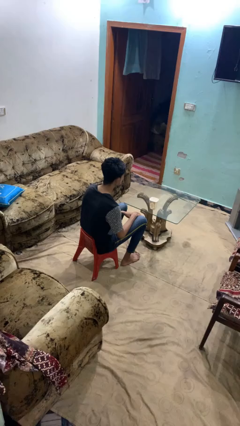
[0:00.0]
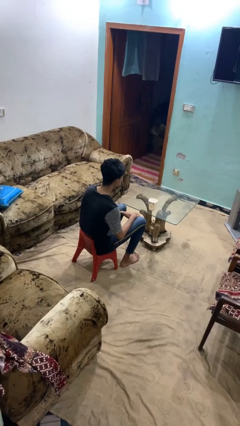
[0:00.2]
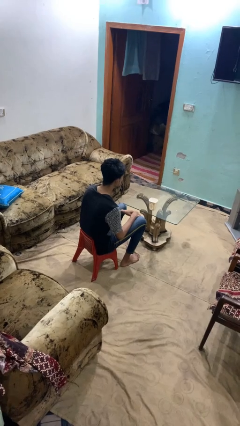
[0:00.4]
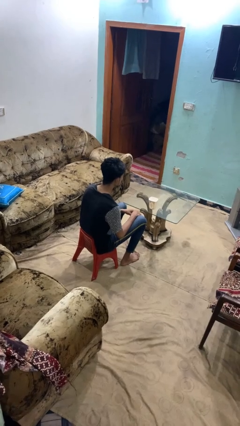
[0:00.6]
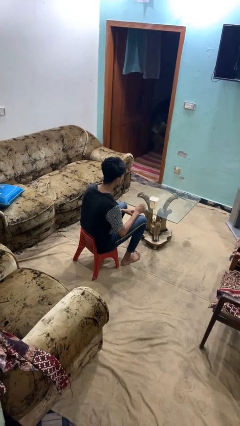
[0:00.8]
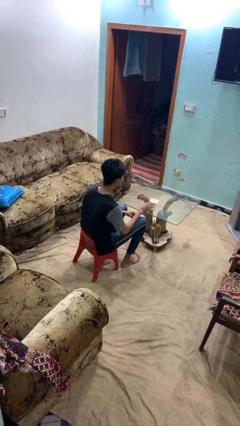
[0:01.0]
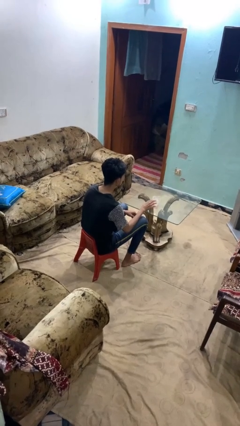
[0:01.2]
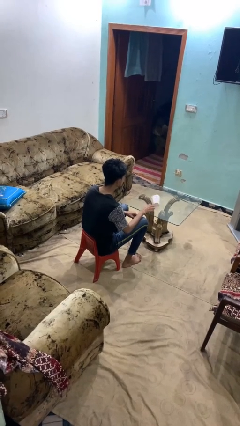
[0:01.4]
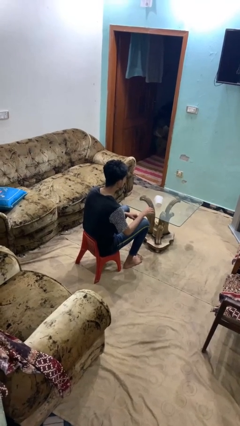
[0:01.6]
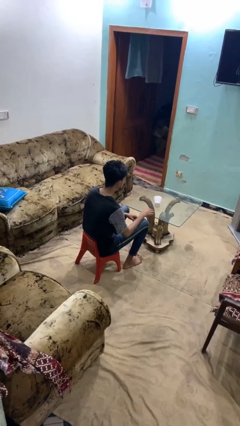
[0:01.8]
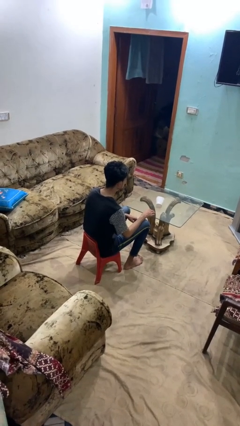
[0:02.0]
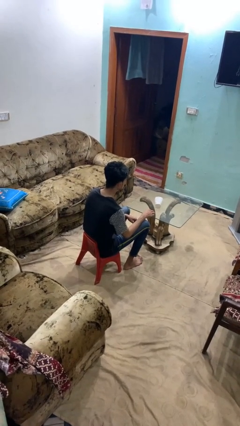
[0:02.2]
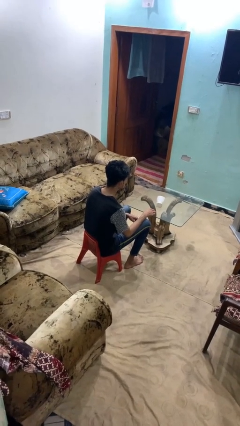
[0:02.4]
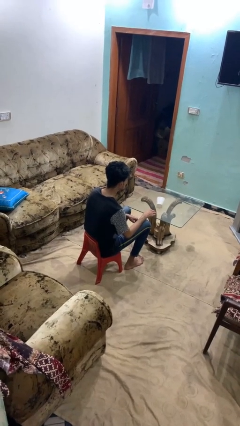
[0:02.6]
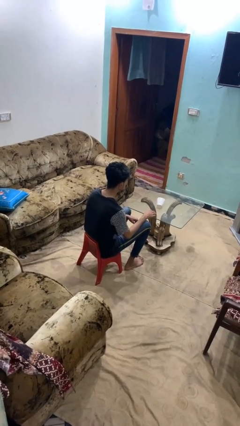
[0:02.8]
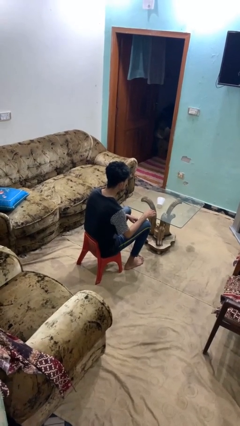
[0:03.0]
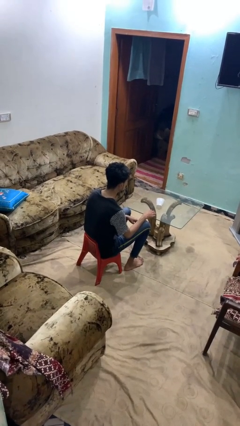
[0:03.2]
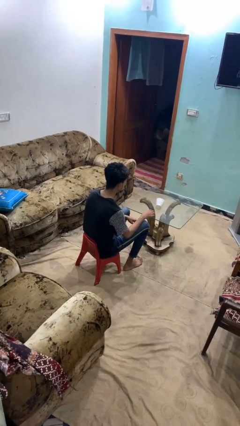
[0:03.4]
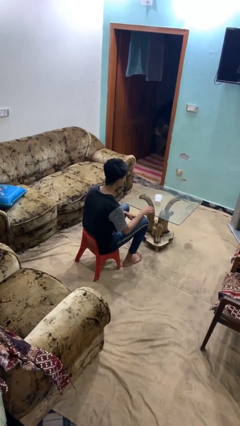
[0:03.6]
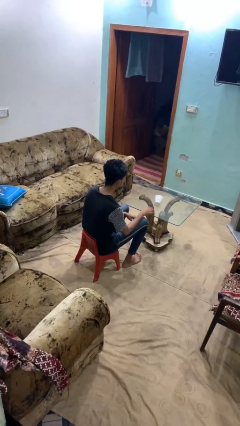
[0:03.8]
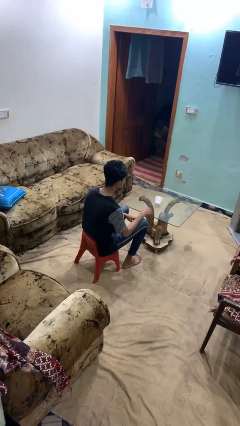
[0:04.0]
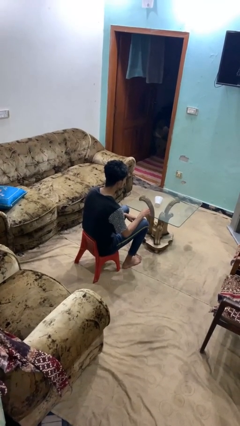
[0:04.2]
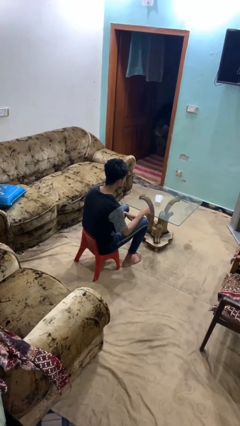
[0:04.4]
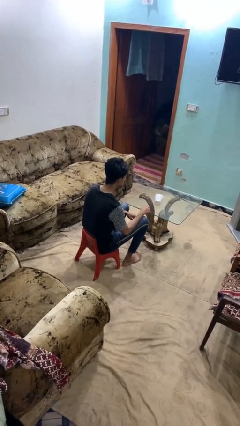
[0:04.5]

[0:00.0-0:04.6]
person knocks over glass

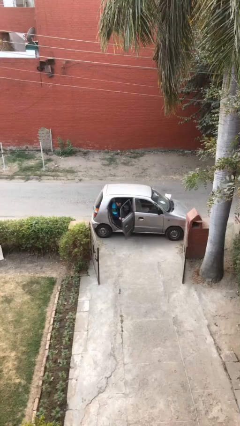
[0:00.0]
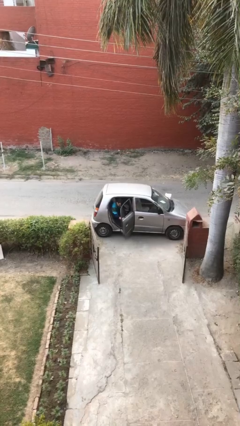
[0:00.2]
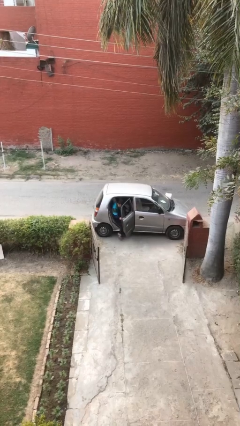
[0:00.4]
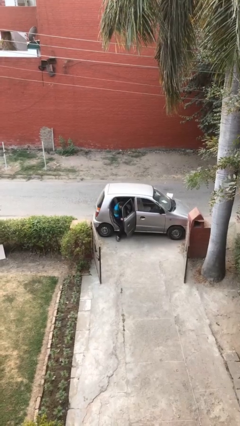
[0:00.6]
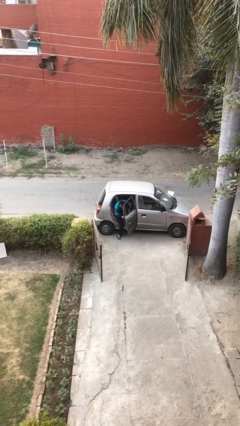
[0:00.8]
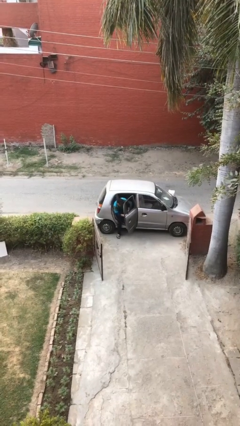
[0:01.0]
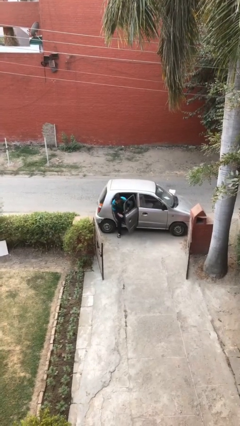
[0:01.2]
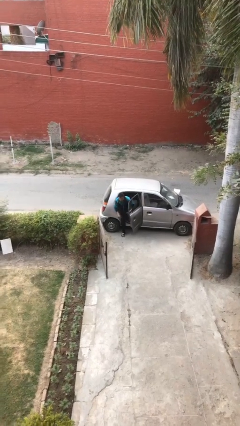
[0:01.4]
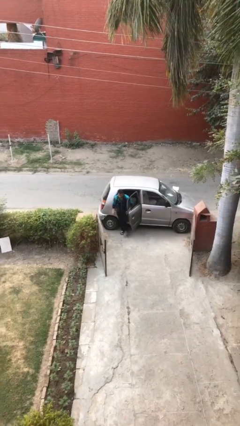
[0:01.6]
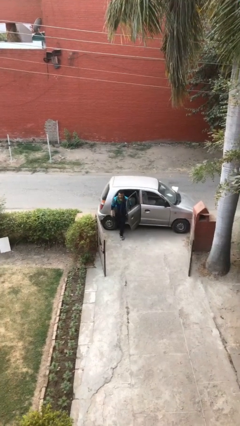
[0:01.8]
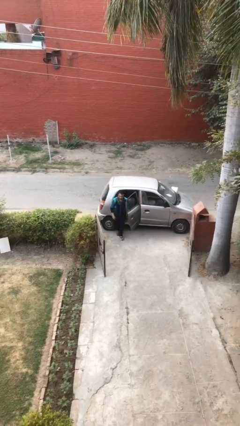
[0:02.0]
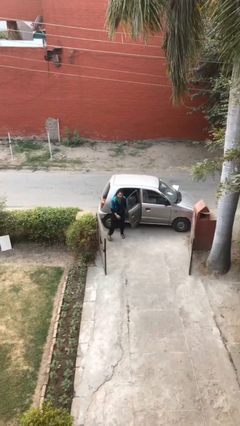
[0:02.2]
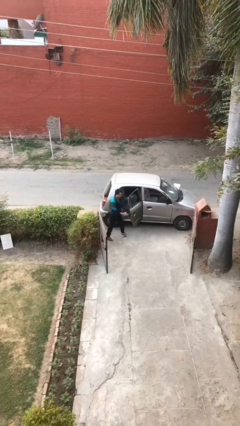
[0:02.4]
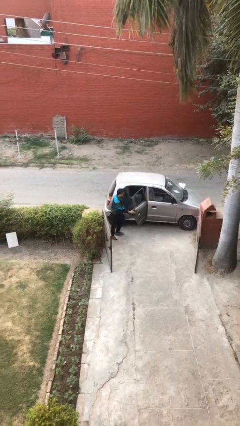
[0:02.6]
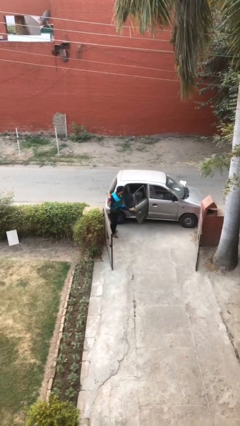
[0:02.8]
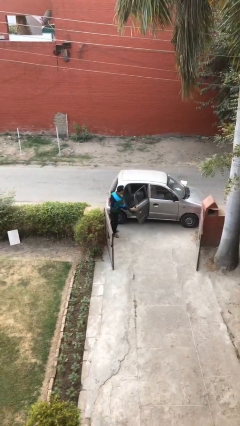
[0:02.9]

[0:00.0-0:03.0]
person exits car

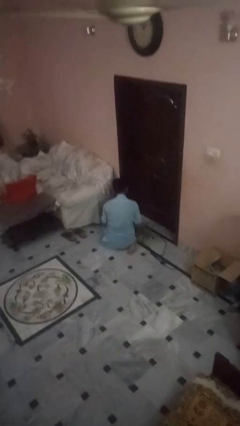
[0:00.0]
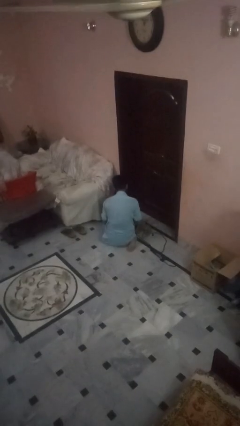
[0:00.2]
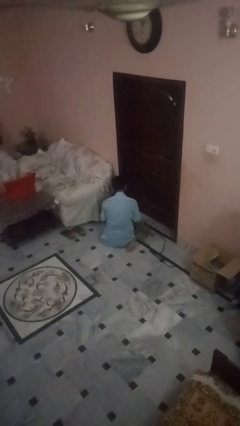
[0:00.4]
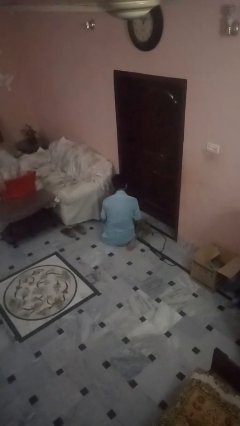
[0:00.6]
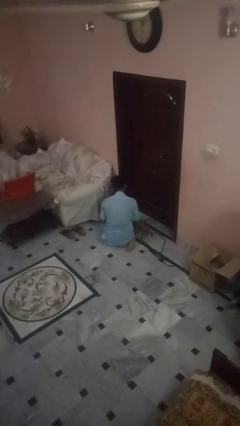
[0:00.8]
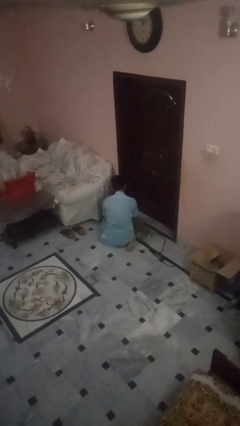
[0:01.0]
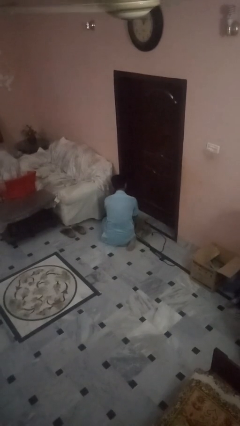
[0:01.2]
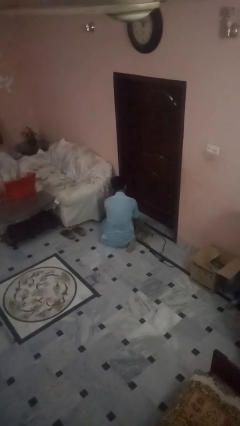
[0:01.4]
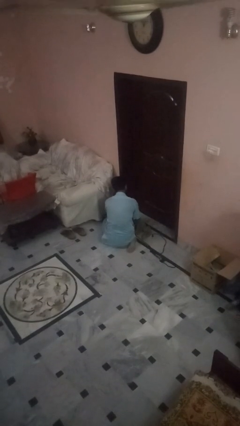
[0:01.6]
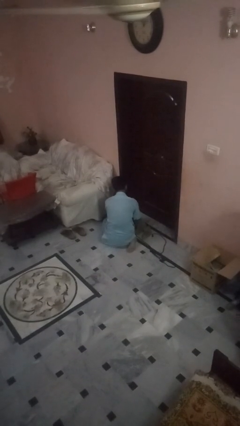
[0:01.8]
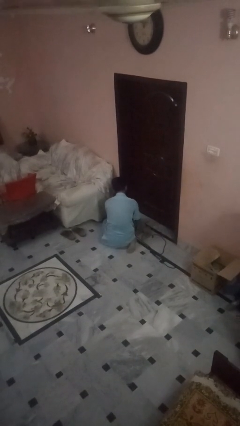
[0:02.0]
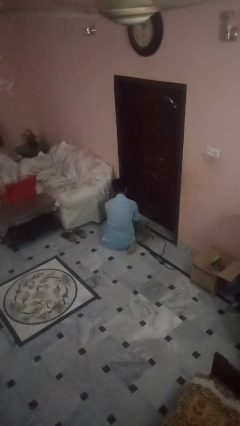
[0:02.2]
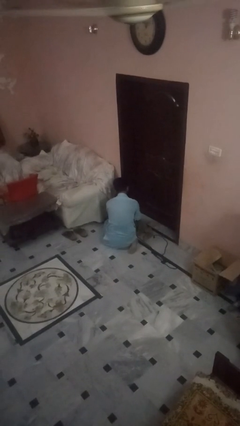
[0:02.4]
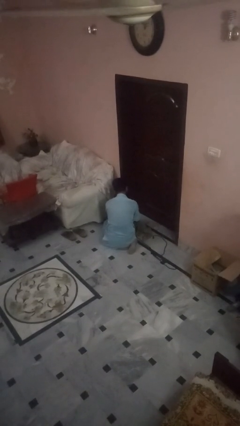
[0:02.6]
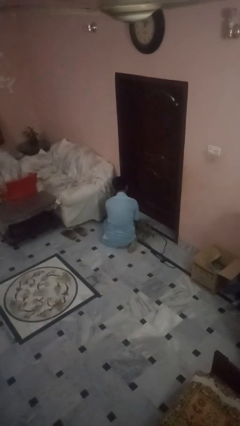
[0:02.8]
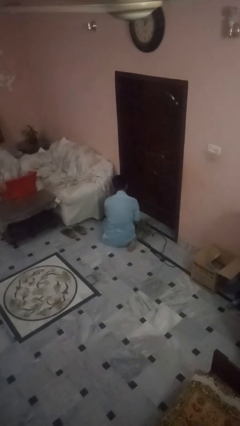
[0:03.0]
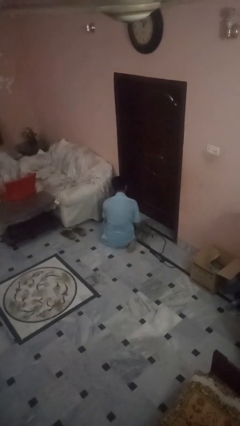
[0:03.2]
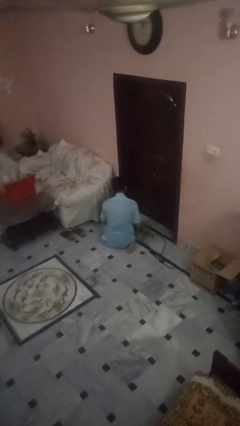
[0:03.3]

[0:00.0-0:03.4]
person unattaches leash from dog

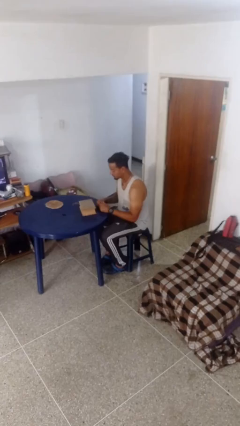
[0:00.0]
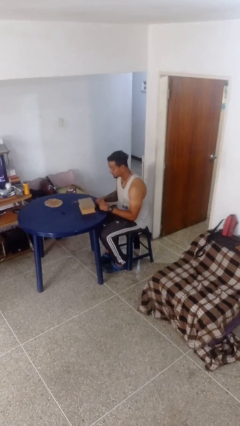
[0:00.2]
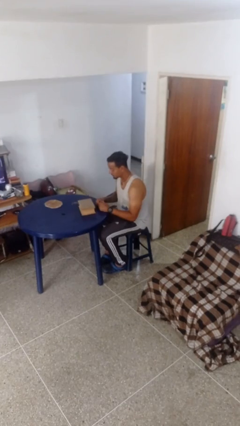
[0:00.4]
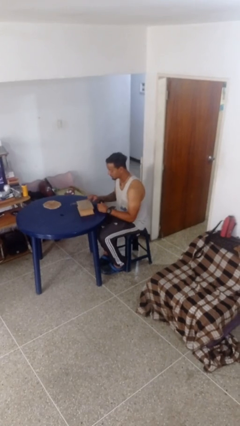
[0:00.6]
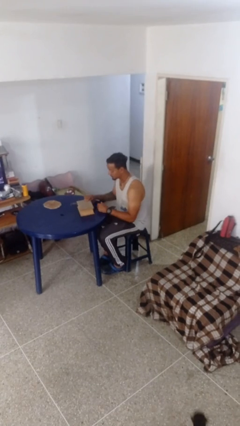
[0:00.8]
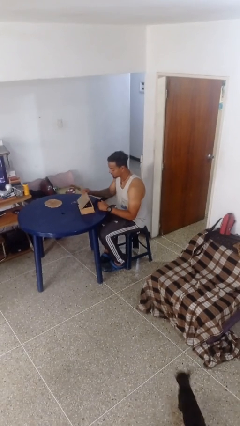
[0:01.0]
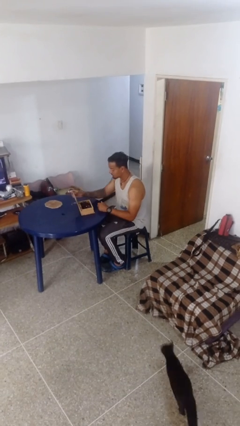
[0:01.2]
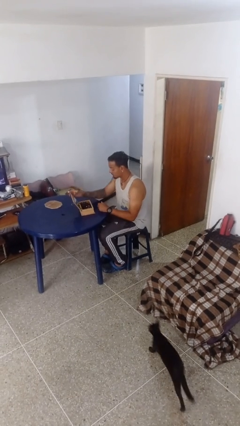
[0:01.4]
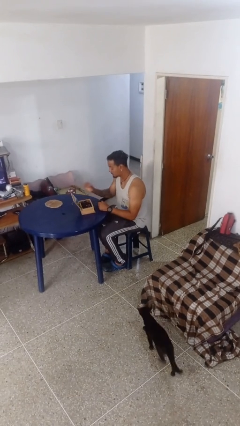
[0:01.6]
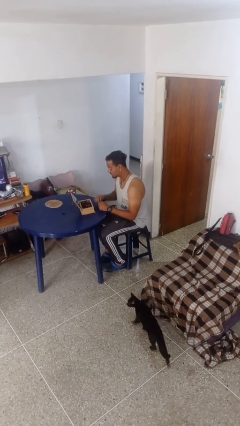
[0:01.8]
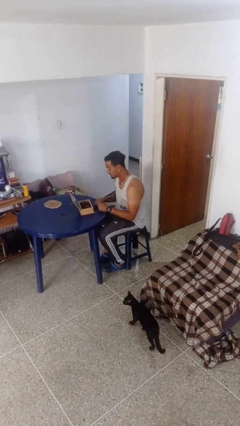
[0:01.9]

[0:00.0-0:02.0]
person opens jewelry box

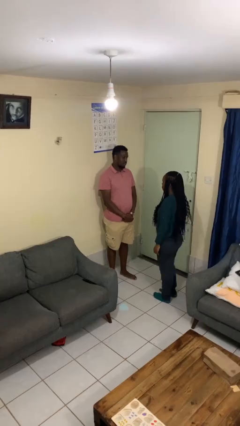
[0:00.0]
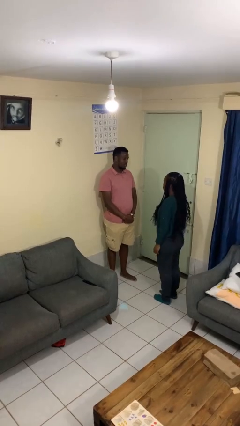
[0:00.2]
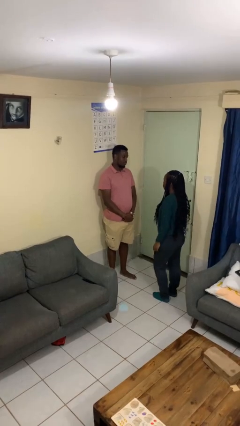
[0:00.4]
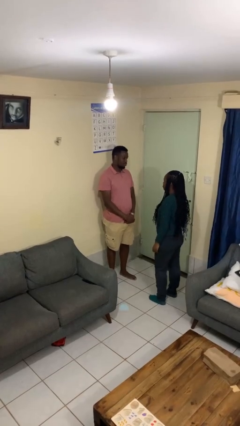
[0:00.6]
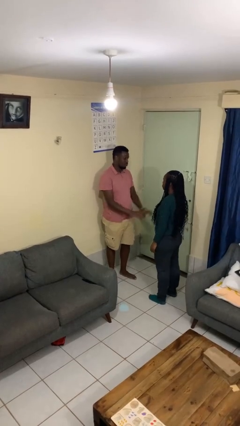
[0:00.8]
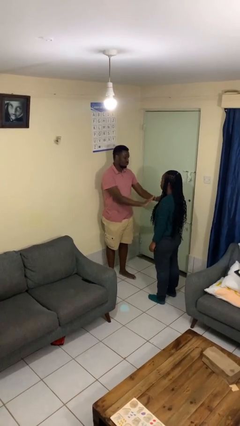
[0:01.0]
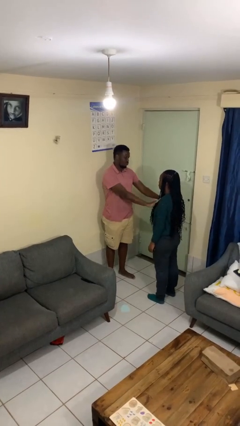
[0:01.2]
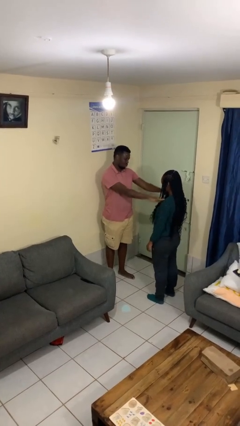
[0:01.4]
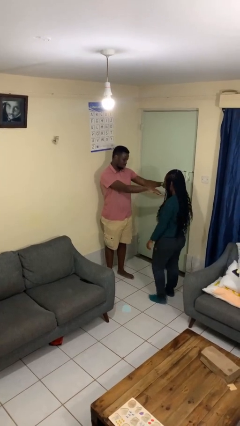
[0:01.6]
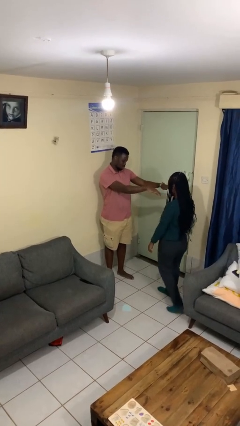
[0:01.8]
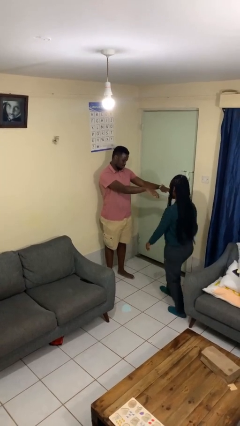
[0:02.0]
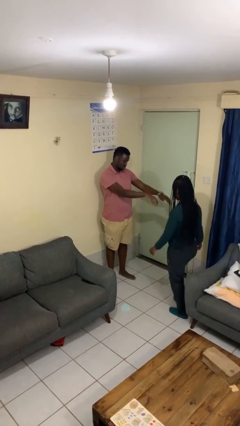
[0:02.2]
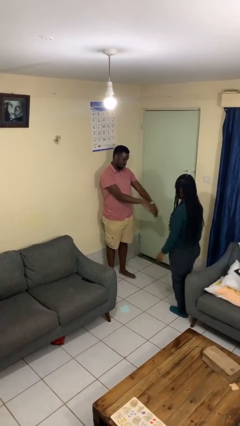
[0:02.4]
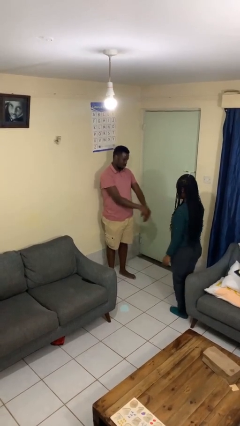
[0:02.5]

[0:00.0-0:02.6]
person shoves person

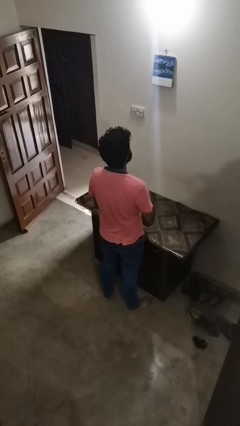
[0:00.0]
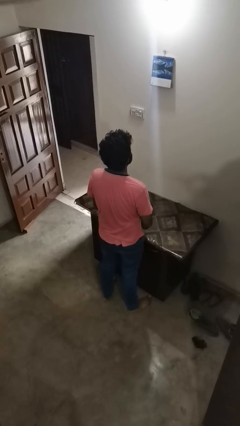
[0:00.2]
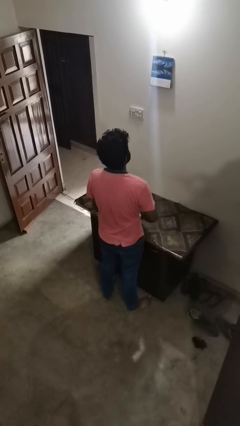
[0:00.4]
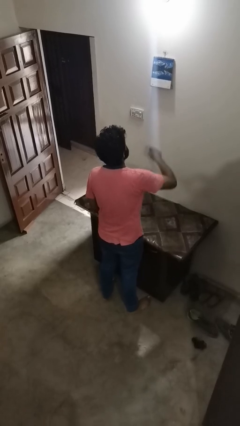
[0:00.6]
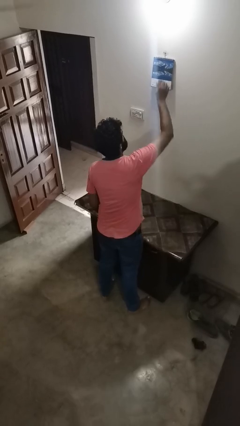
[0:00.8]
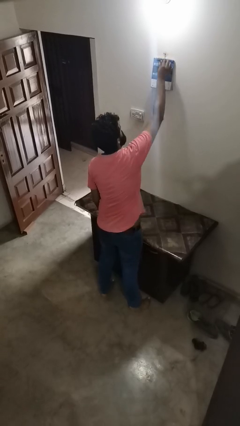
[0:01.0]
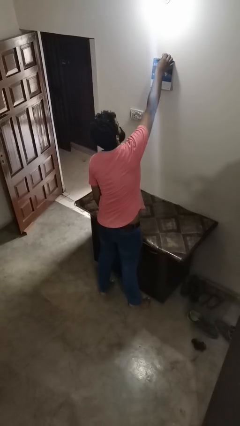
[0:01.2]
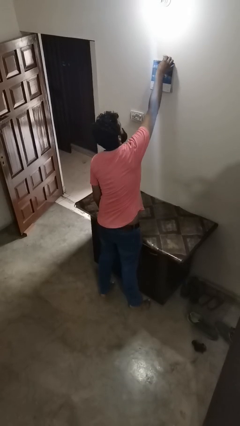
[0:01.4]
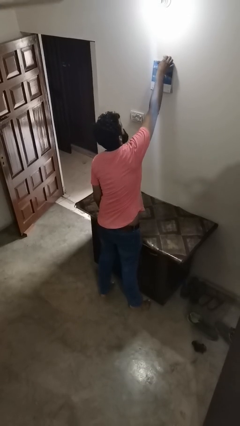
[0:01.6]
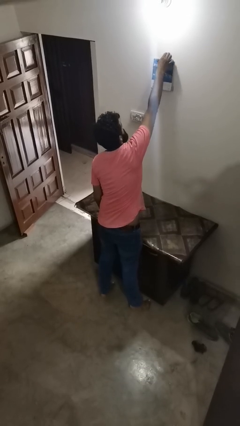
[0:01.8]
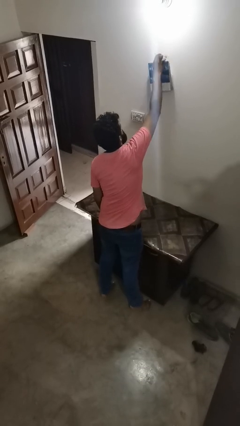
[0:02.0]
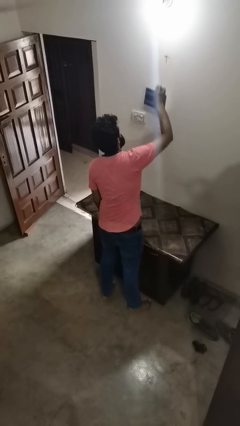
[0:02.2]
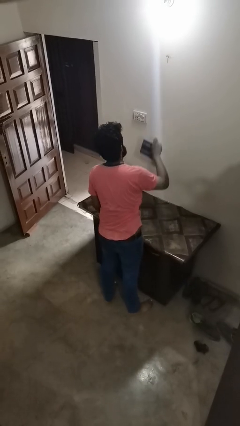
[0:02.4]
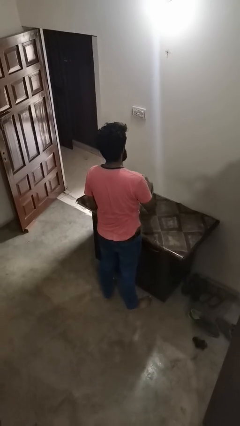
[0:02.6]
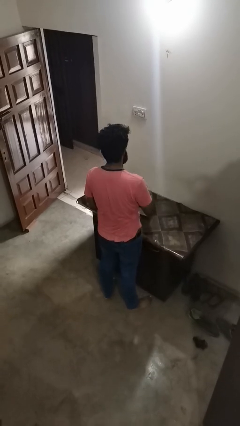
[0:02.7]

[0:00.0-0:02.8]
person takes down picture frame
